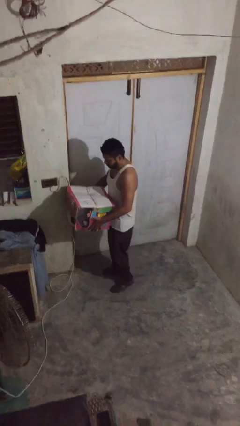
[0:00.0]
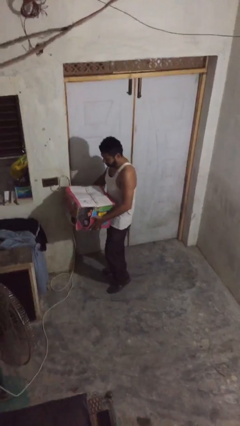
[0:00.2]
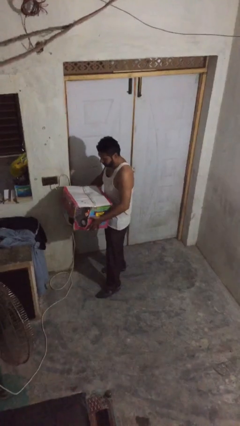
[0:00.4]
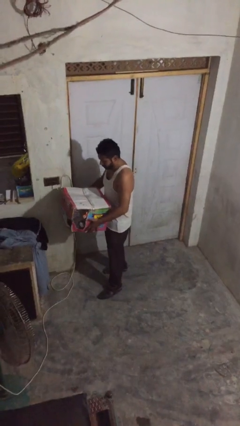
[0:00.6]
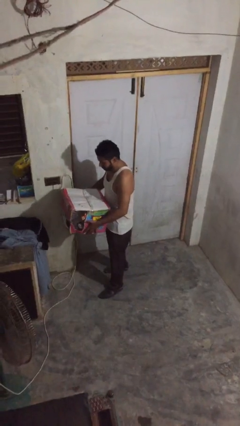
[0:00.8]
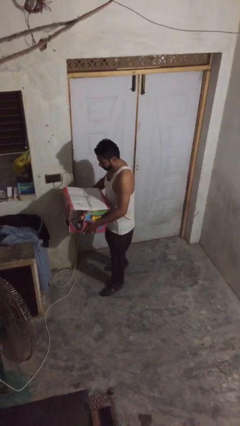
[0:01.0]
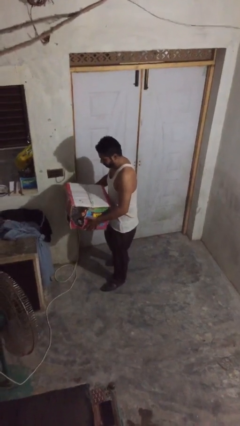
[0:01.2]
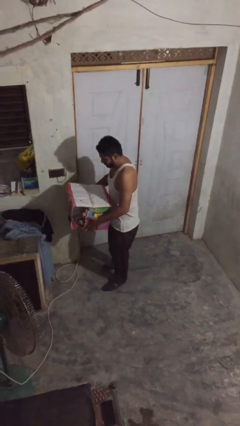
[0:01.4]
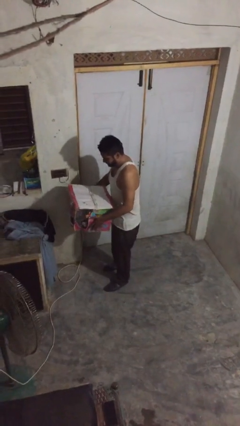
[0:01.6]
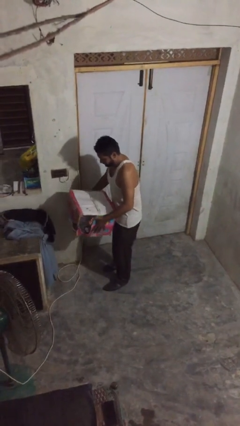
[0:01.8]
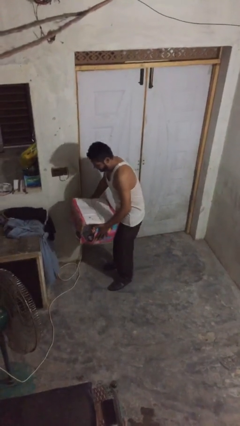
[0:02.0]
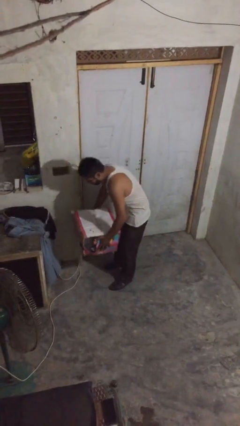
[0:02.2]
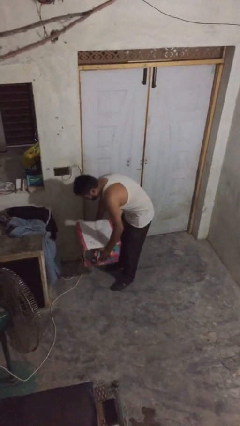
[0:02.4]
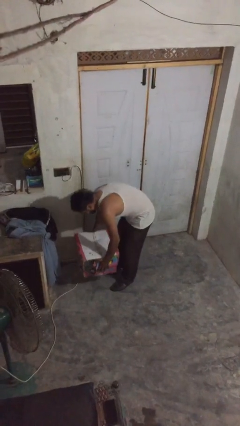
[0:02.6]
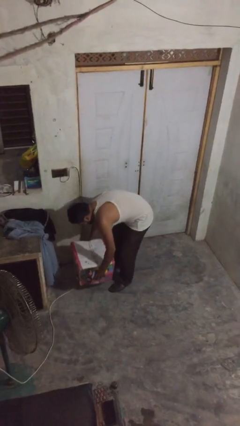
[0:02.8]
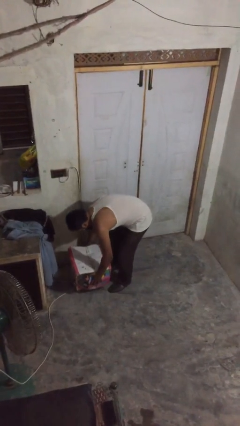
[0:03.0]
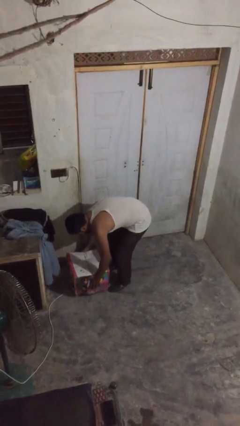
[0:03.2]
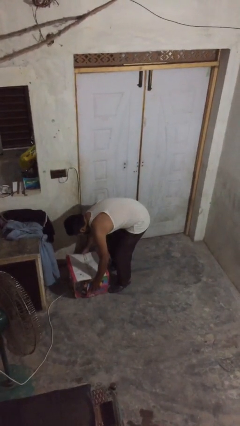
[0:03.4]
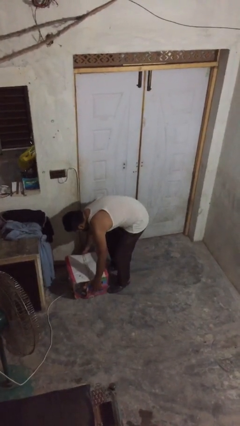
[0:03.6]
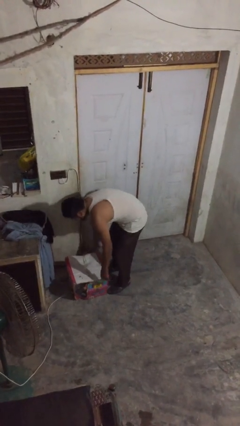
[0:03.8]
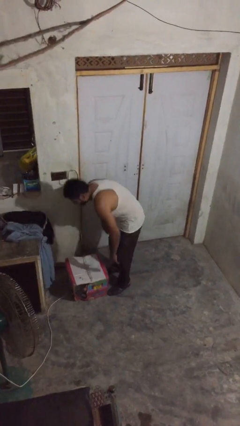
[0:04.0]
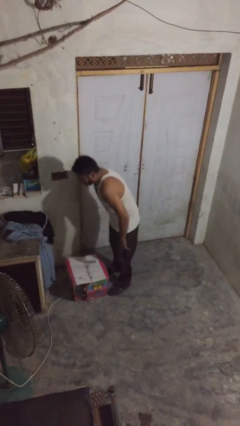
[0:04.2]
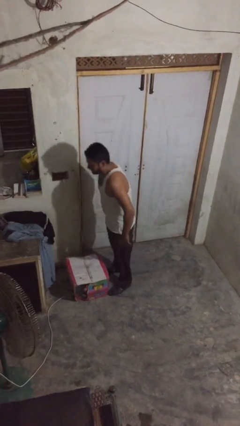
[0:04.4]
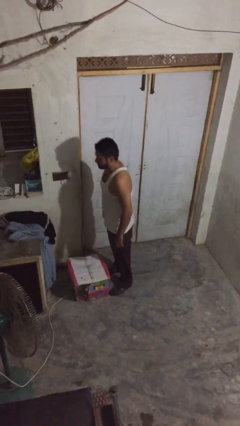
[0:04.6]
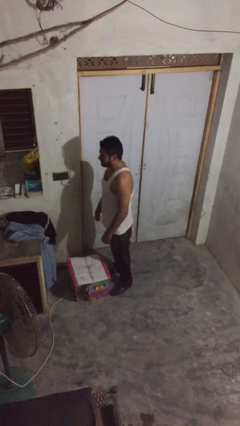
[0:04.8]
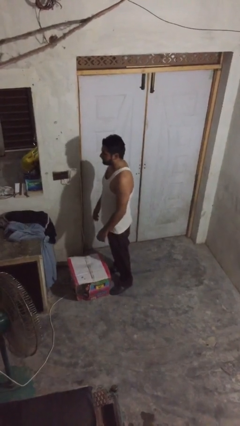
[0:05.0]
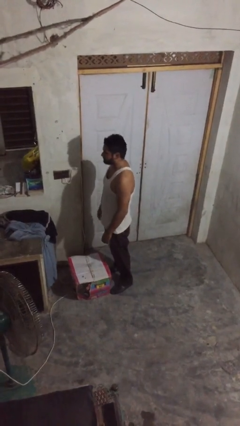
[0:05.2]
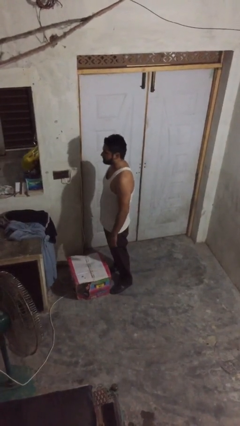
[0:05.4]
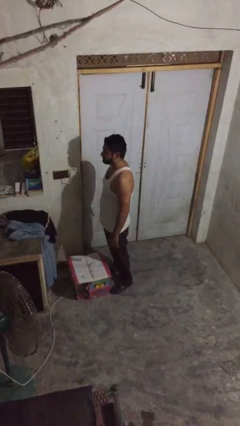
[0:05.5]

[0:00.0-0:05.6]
person puts down object on floor

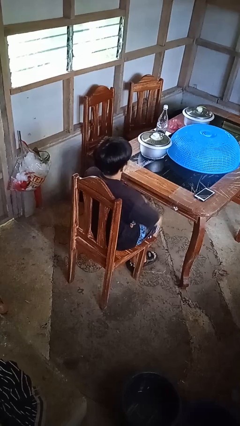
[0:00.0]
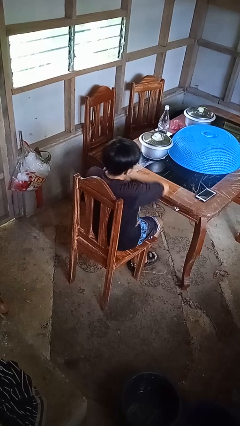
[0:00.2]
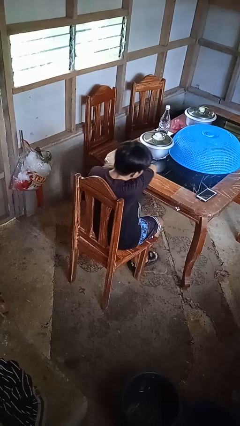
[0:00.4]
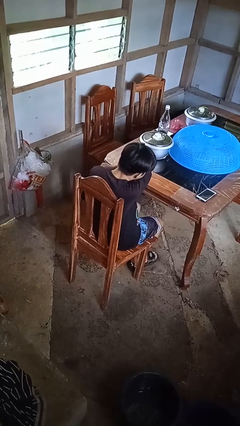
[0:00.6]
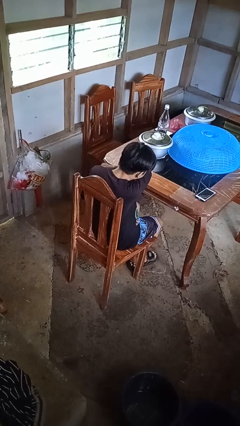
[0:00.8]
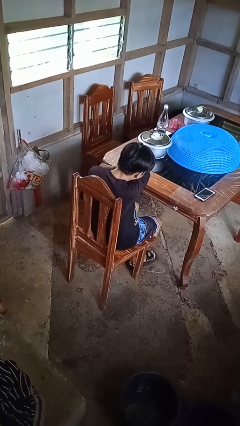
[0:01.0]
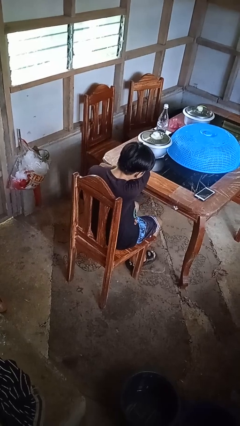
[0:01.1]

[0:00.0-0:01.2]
person sneezes into arm

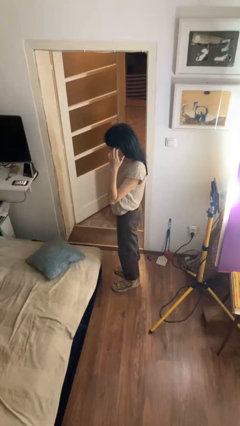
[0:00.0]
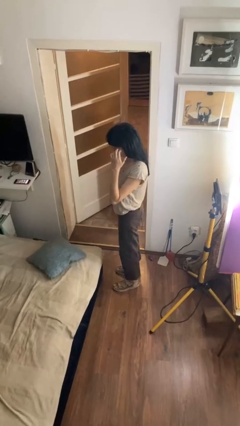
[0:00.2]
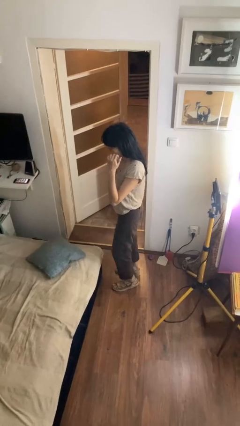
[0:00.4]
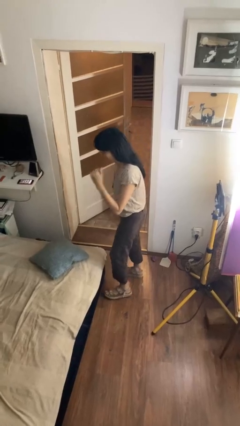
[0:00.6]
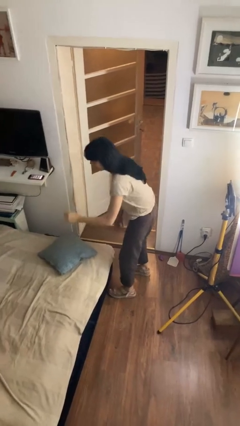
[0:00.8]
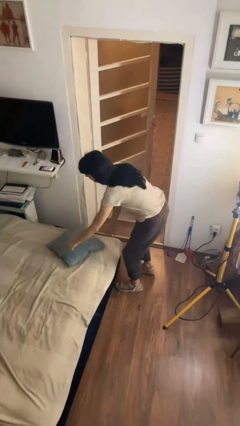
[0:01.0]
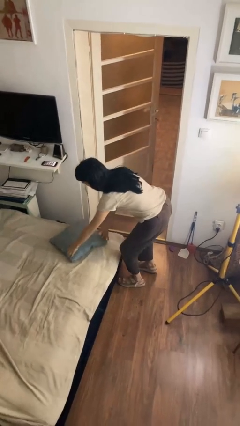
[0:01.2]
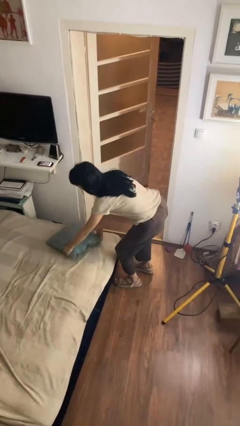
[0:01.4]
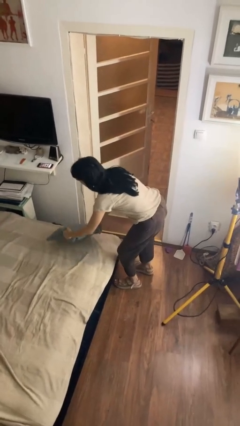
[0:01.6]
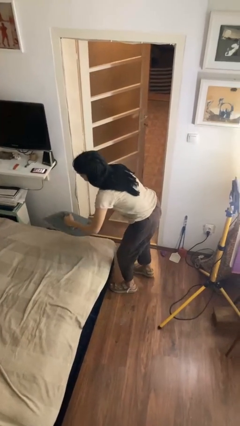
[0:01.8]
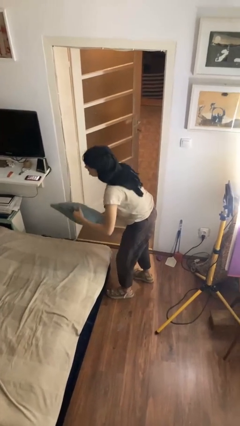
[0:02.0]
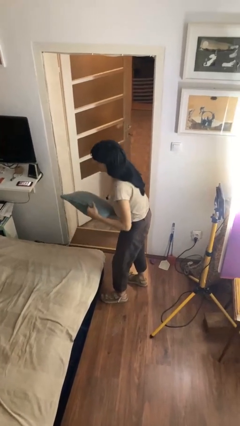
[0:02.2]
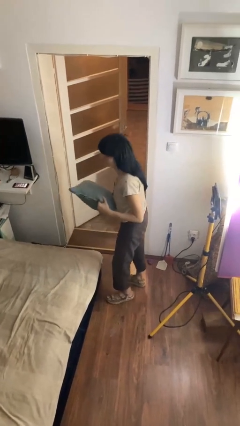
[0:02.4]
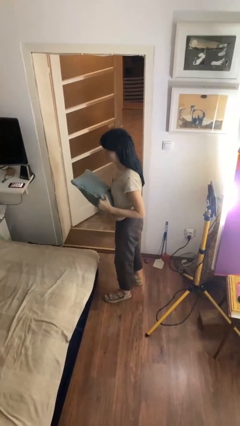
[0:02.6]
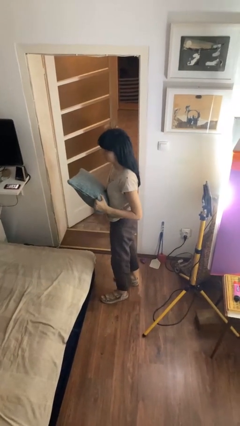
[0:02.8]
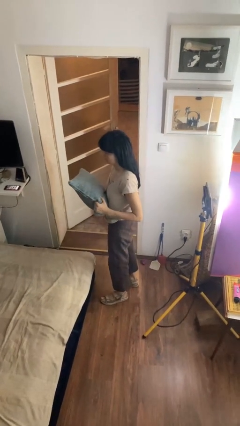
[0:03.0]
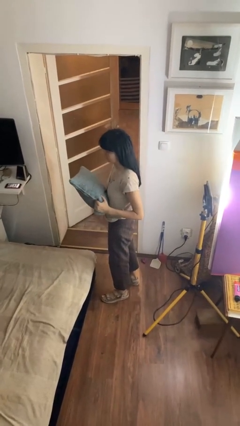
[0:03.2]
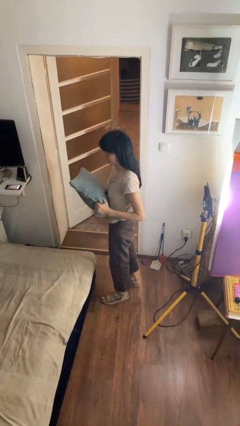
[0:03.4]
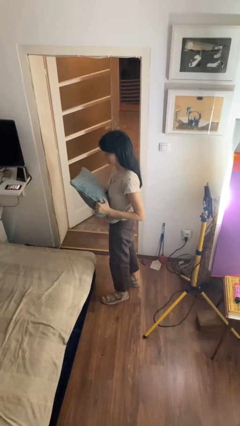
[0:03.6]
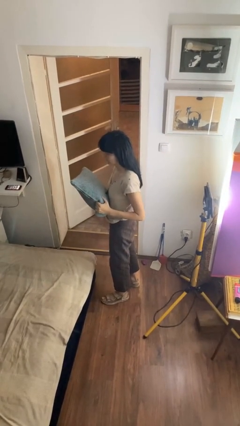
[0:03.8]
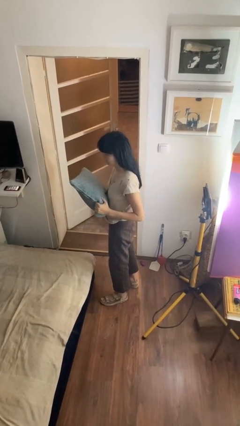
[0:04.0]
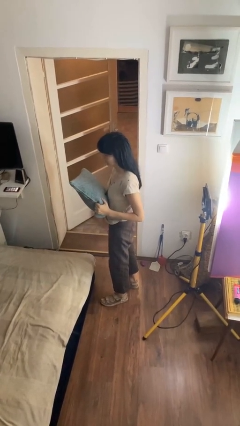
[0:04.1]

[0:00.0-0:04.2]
person picks up object from bed

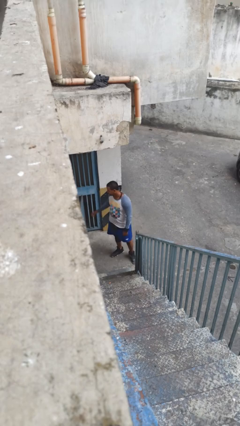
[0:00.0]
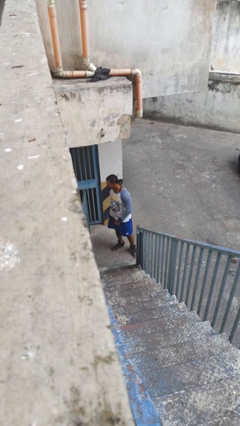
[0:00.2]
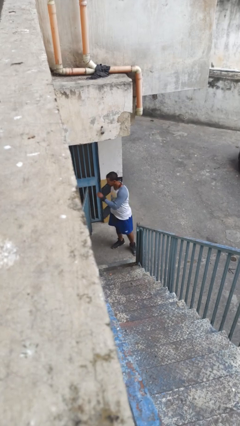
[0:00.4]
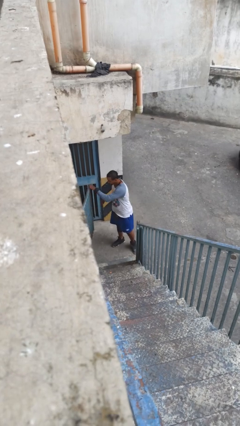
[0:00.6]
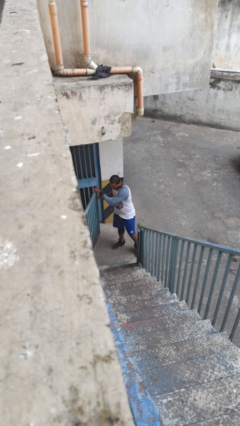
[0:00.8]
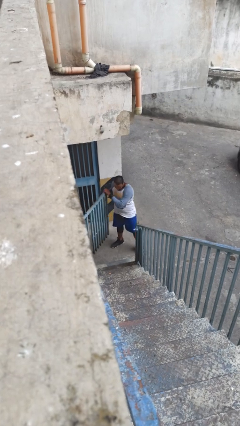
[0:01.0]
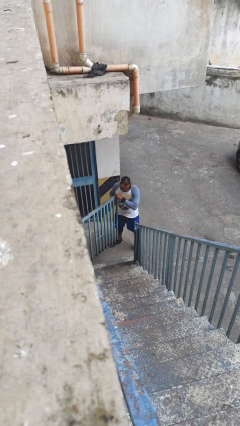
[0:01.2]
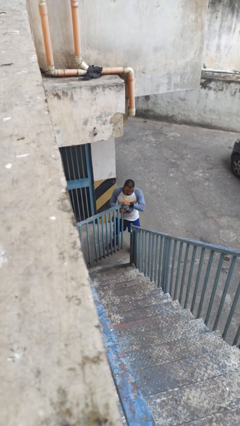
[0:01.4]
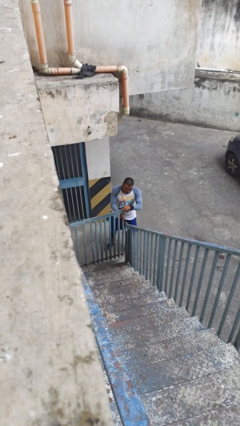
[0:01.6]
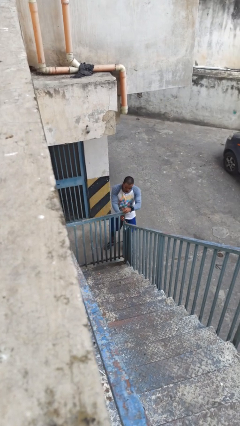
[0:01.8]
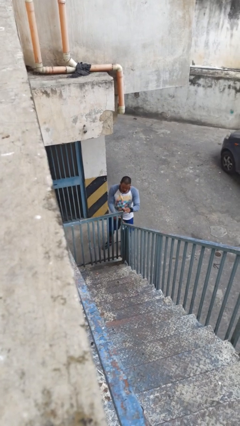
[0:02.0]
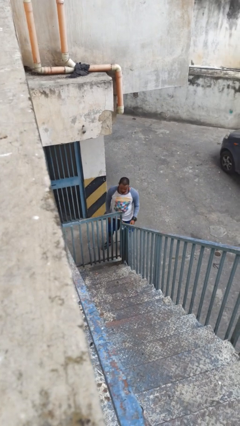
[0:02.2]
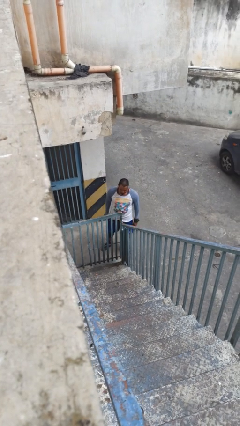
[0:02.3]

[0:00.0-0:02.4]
person closes facility door

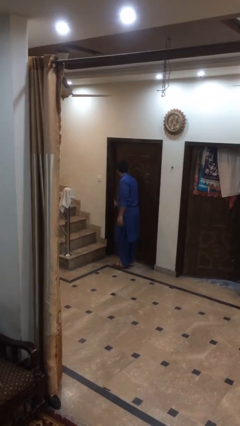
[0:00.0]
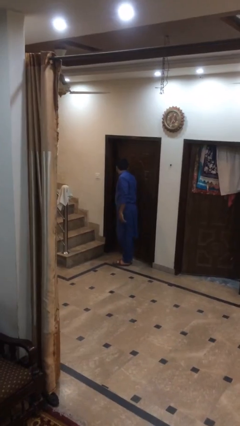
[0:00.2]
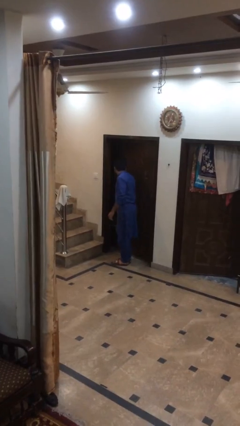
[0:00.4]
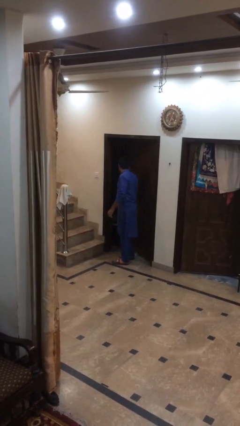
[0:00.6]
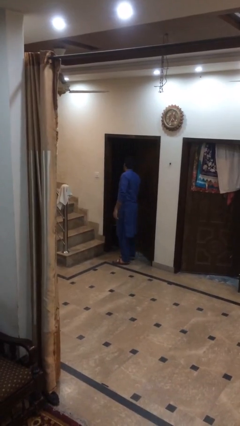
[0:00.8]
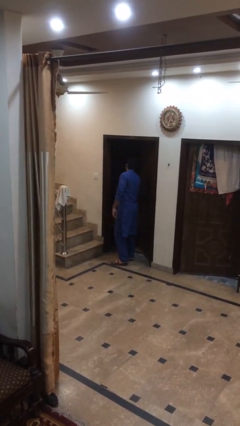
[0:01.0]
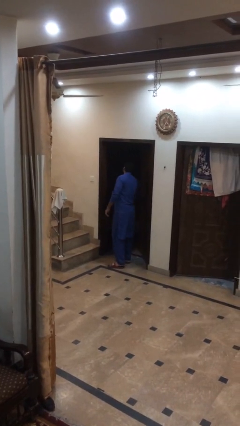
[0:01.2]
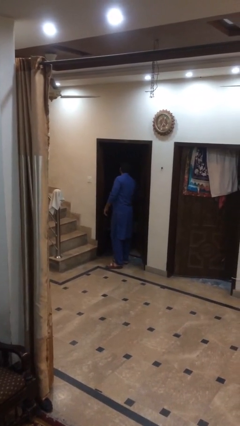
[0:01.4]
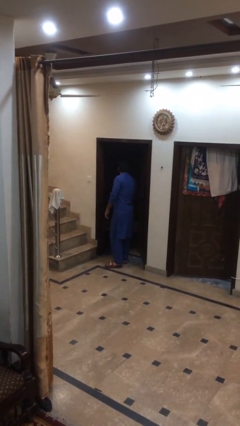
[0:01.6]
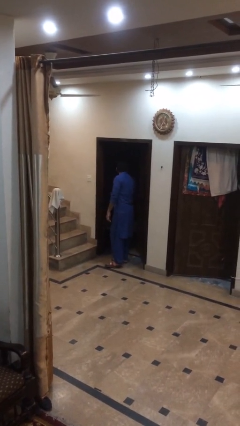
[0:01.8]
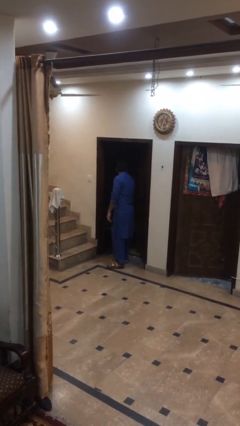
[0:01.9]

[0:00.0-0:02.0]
person opens facility door

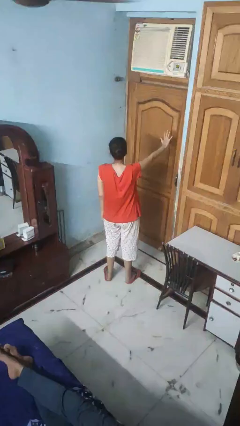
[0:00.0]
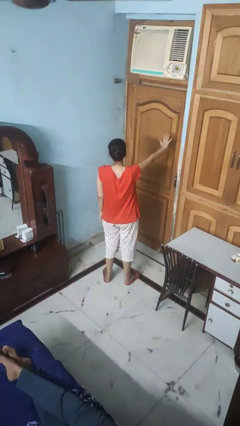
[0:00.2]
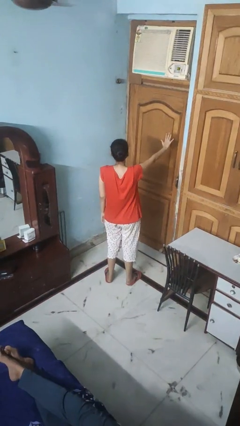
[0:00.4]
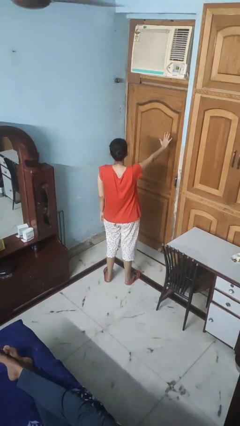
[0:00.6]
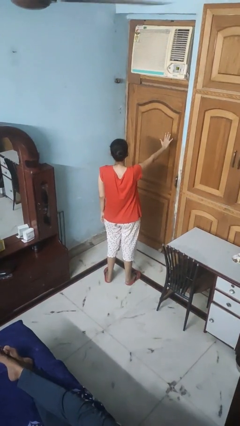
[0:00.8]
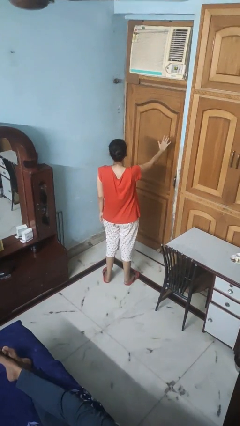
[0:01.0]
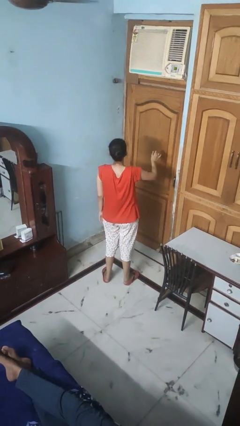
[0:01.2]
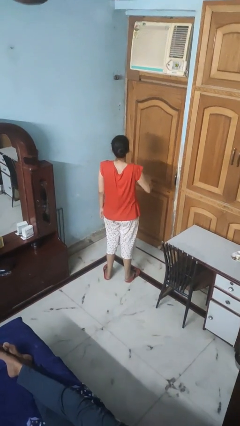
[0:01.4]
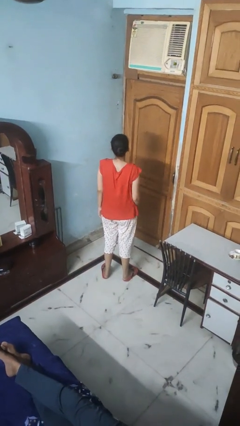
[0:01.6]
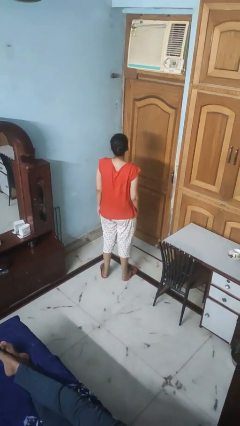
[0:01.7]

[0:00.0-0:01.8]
person gestures number five

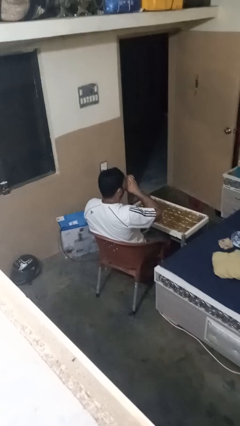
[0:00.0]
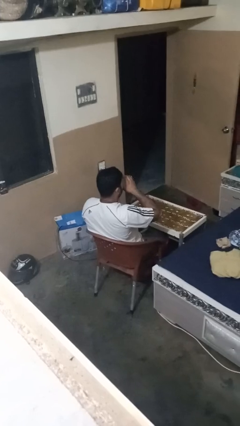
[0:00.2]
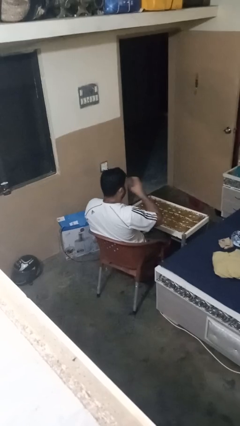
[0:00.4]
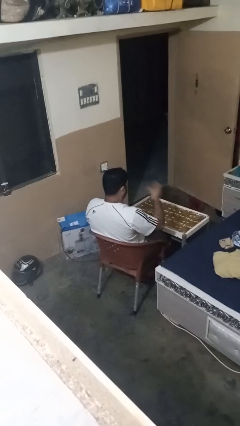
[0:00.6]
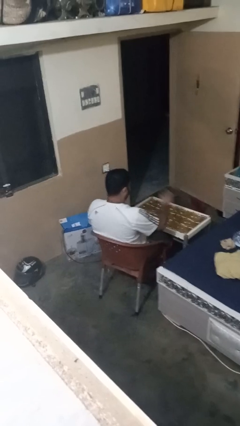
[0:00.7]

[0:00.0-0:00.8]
person puts down object on table
